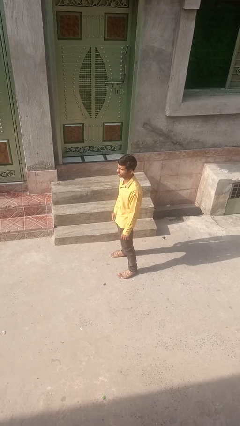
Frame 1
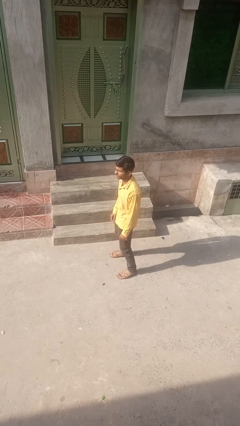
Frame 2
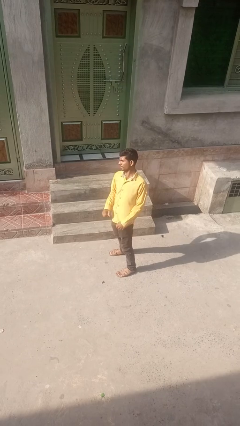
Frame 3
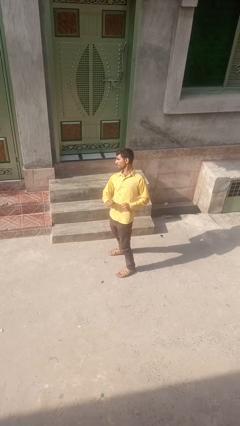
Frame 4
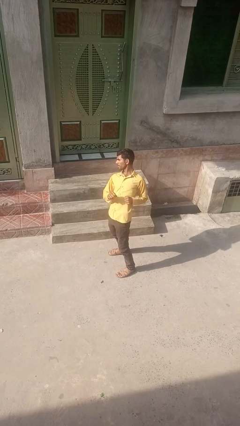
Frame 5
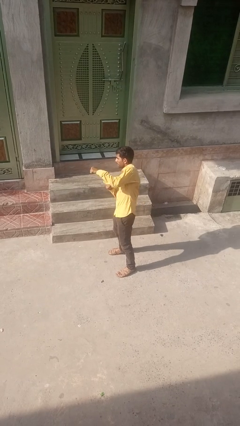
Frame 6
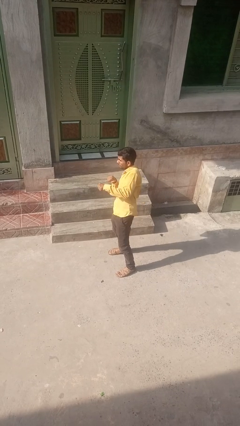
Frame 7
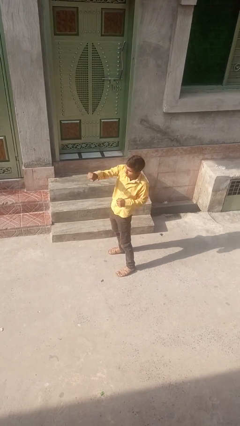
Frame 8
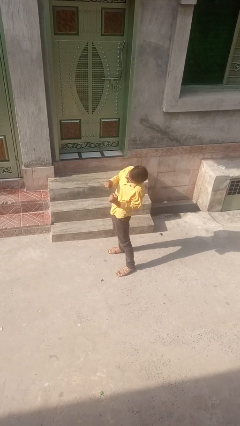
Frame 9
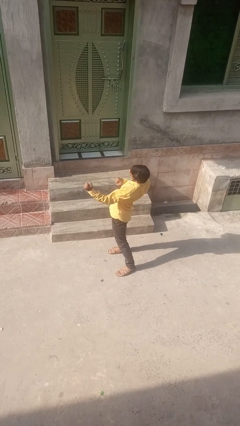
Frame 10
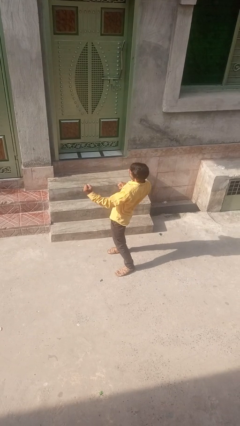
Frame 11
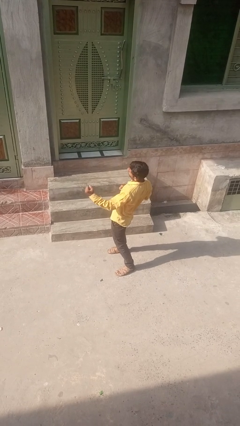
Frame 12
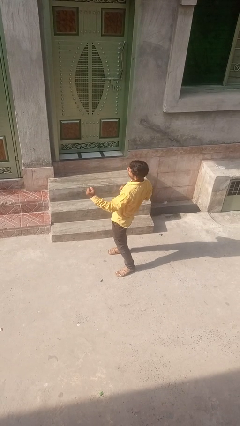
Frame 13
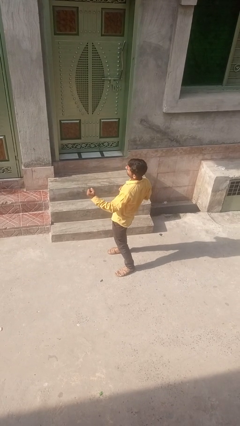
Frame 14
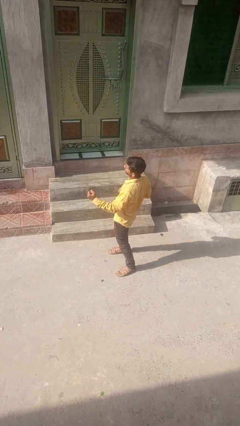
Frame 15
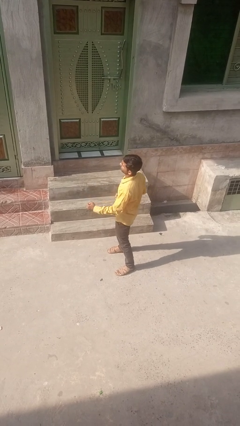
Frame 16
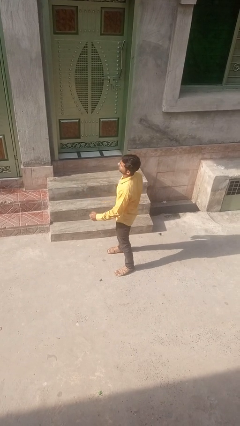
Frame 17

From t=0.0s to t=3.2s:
person punches

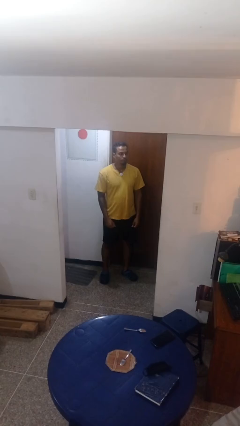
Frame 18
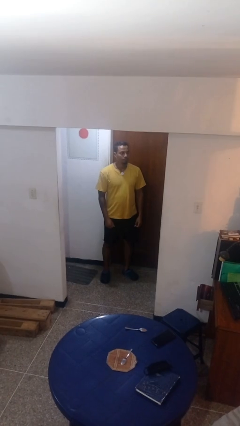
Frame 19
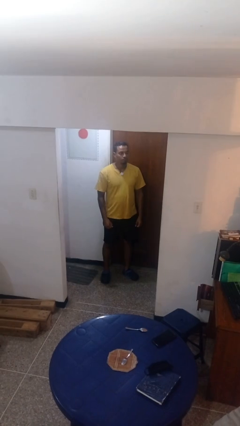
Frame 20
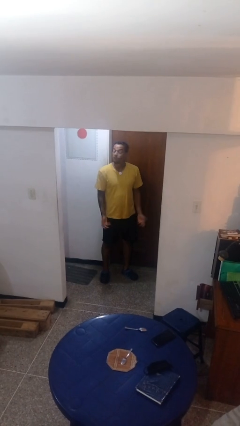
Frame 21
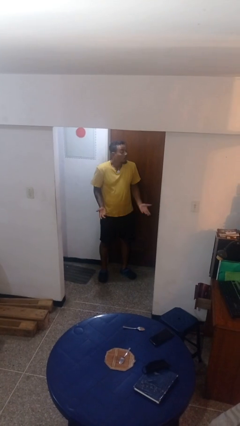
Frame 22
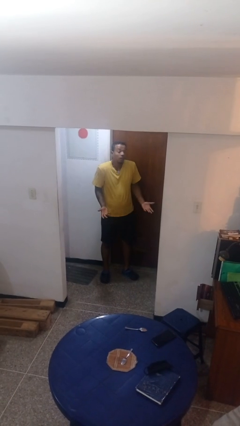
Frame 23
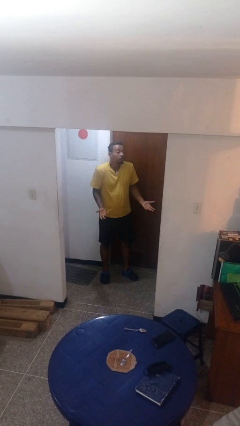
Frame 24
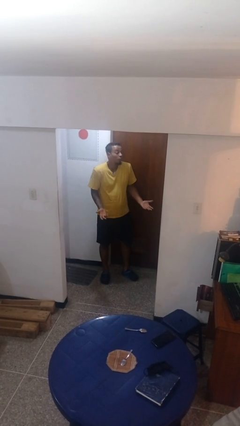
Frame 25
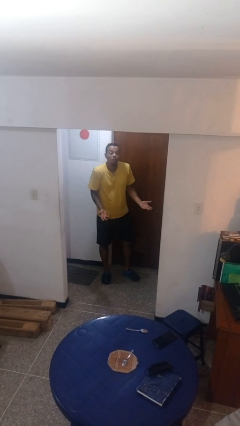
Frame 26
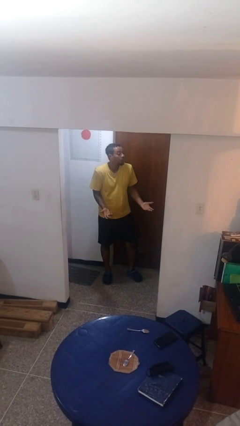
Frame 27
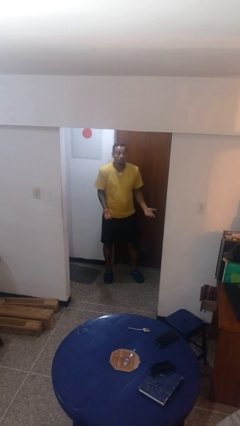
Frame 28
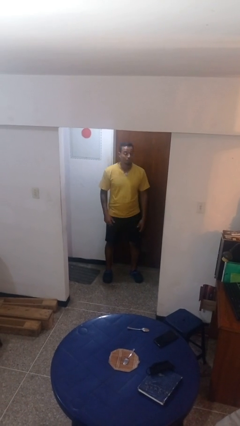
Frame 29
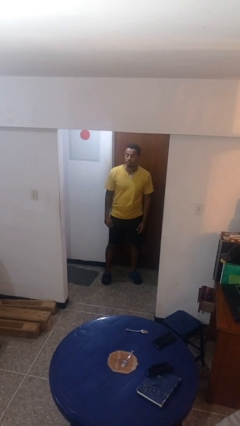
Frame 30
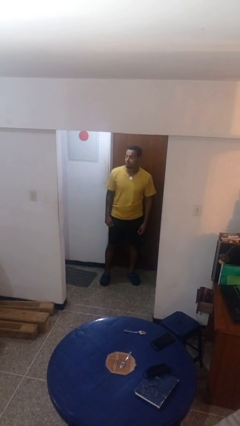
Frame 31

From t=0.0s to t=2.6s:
person shakes head

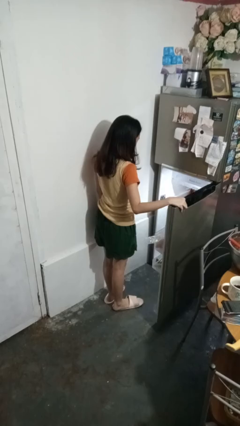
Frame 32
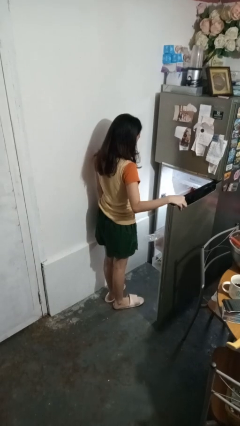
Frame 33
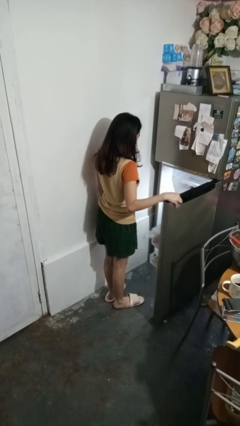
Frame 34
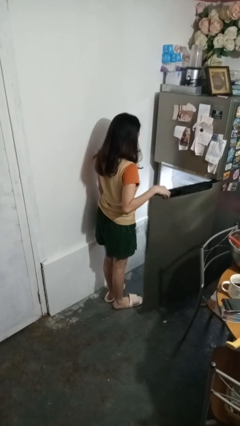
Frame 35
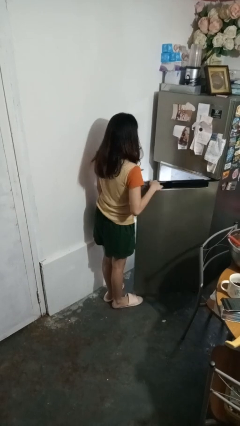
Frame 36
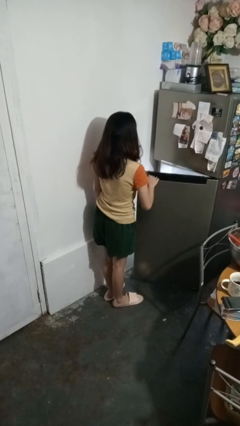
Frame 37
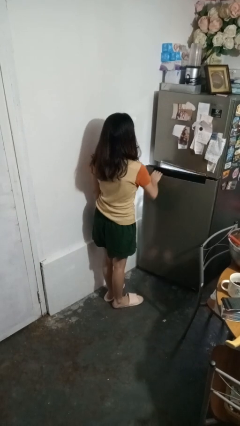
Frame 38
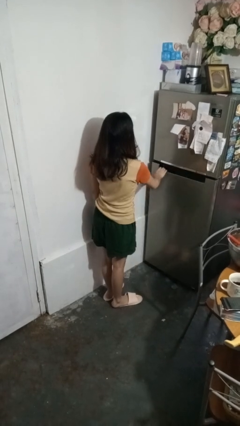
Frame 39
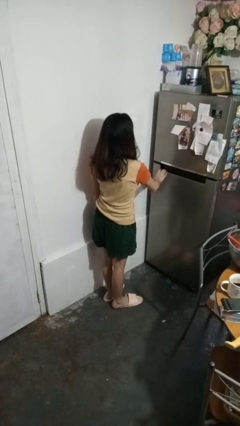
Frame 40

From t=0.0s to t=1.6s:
person closes refrigerator

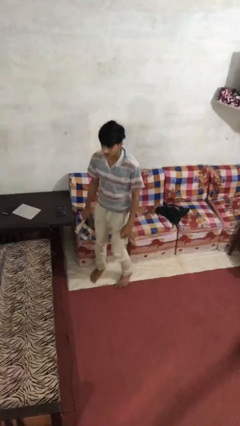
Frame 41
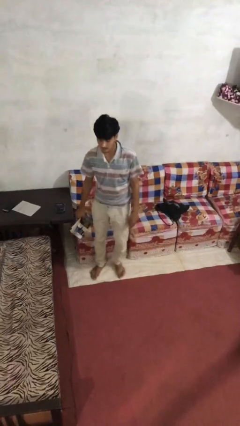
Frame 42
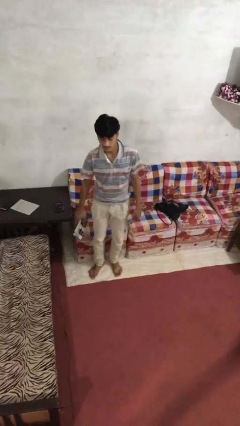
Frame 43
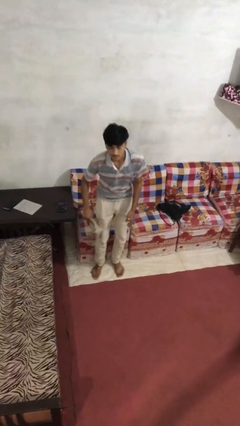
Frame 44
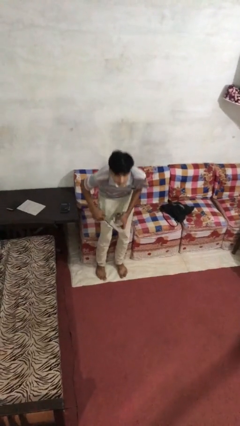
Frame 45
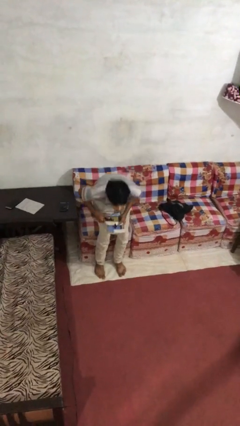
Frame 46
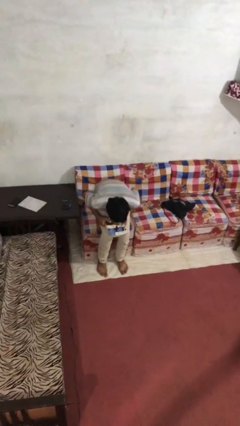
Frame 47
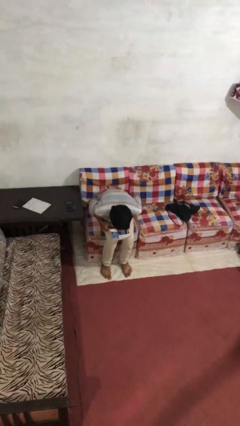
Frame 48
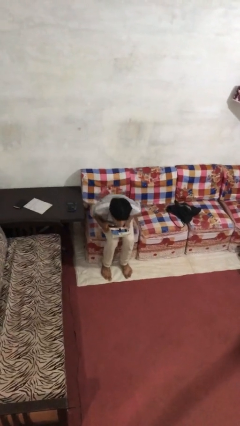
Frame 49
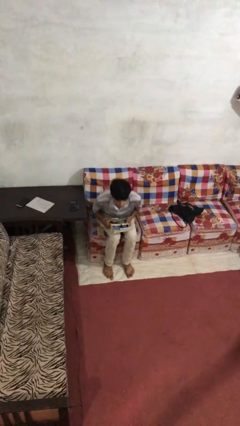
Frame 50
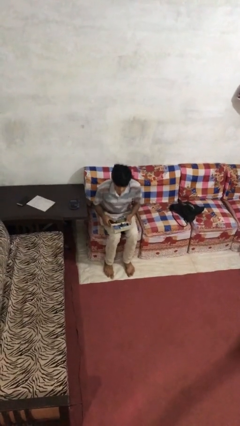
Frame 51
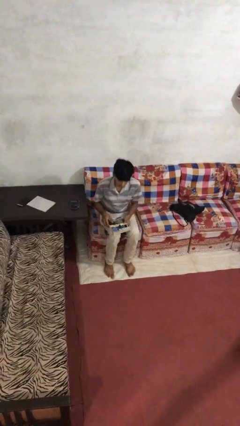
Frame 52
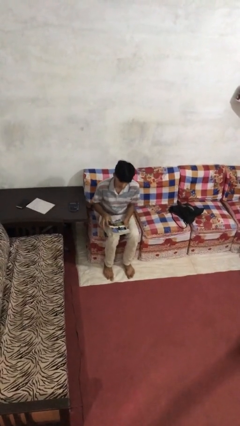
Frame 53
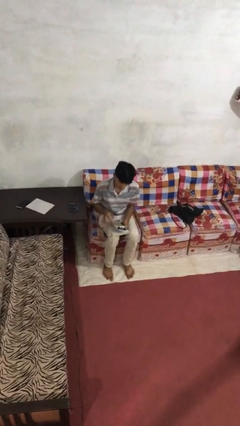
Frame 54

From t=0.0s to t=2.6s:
person sits down

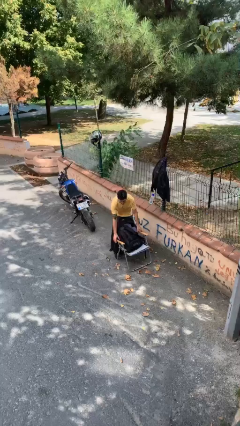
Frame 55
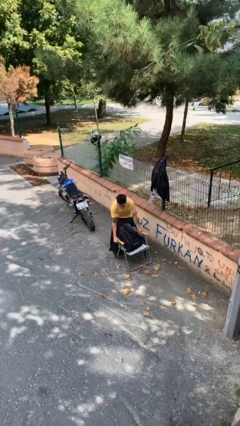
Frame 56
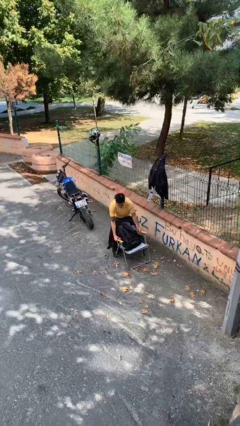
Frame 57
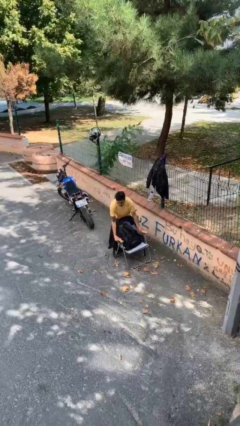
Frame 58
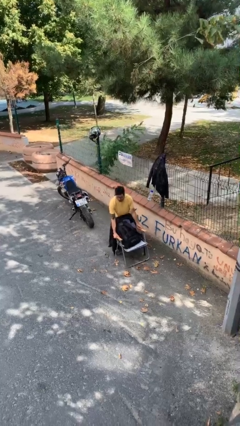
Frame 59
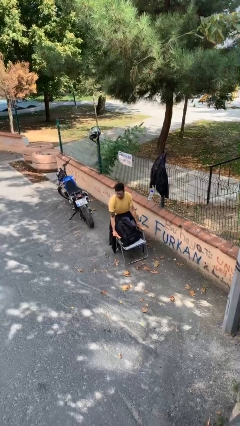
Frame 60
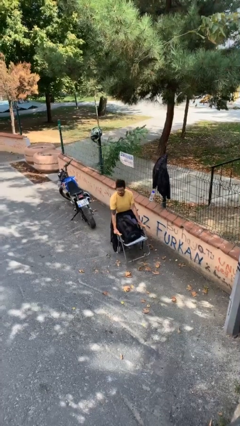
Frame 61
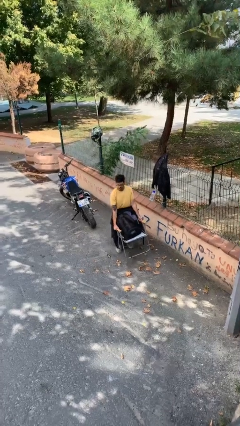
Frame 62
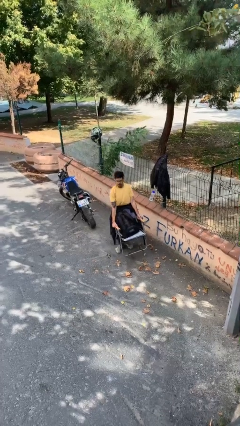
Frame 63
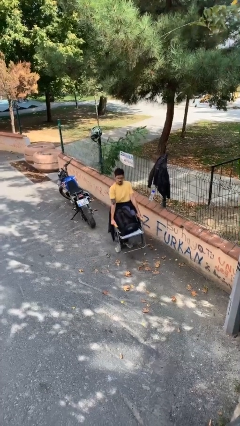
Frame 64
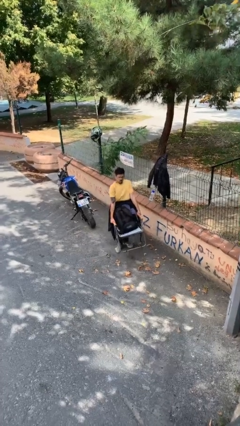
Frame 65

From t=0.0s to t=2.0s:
person picks up object from floor

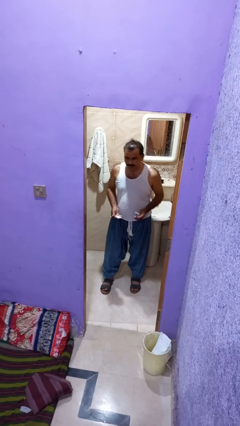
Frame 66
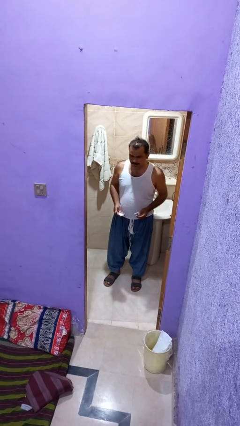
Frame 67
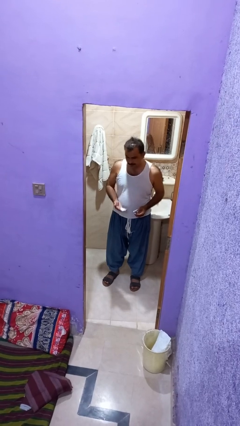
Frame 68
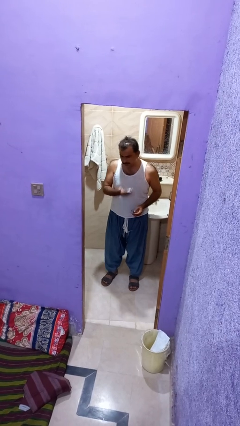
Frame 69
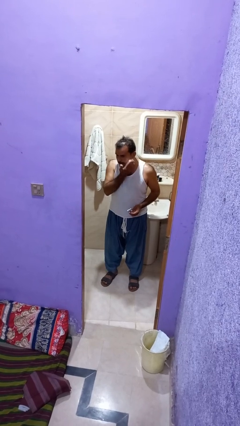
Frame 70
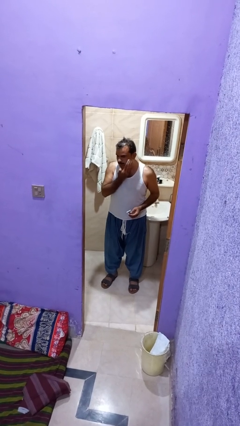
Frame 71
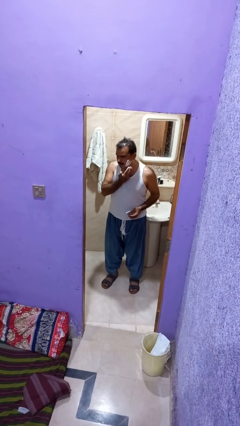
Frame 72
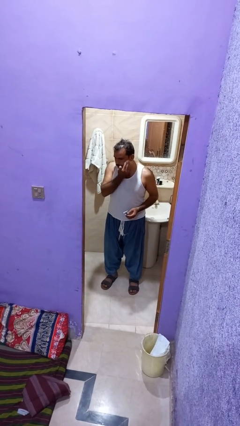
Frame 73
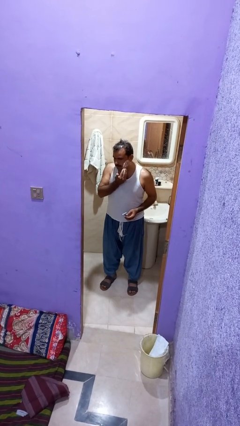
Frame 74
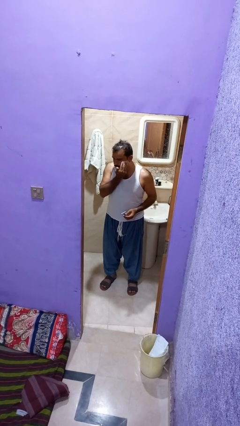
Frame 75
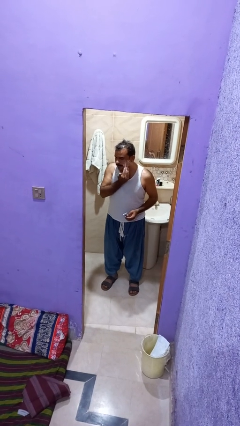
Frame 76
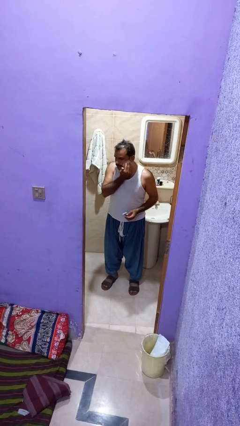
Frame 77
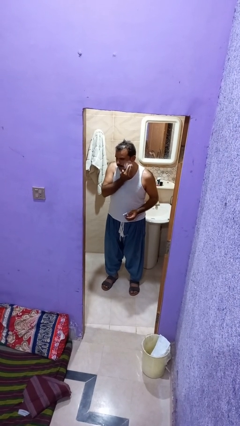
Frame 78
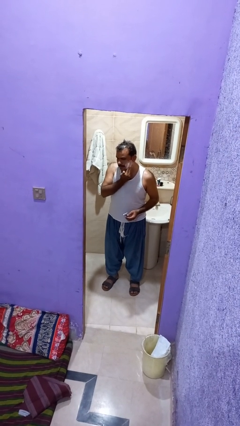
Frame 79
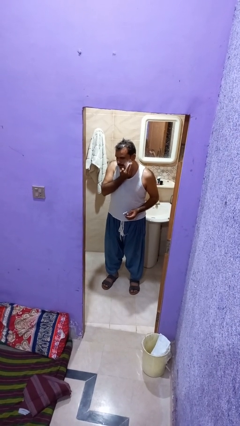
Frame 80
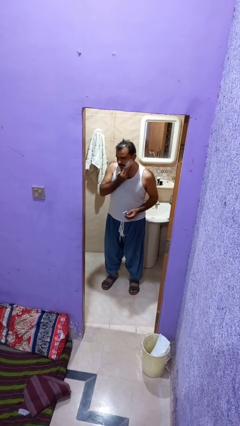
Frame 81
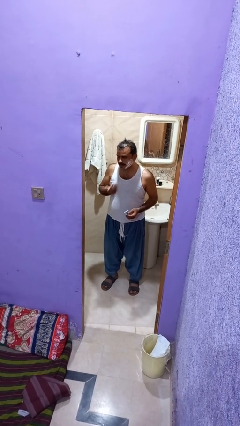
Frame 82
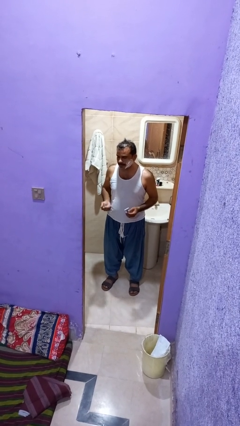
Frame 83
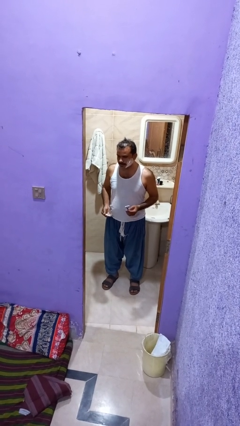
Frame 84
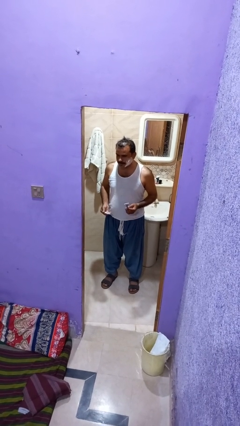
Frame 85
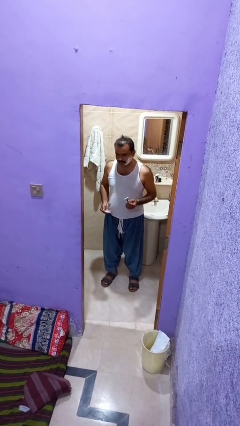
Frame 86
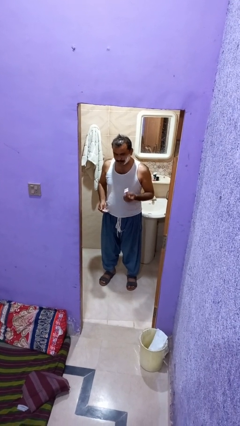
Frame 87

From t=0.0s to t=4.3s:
person applies shaving cream

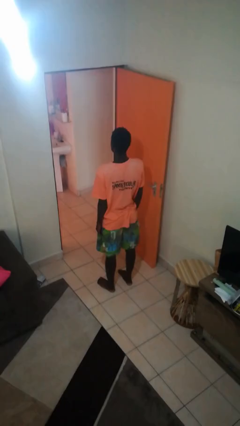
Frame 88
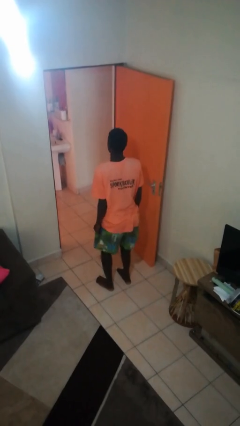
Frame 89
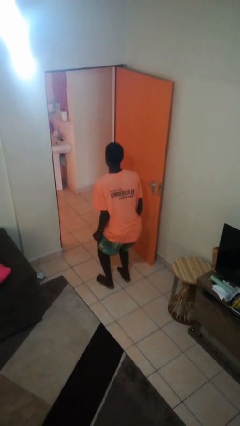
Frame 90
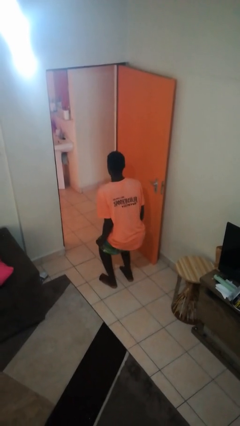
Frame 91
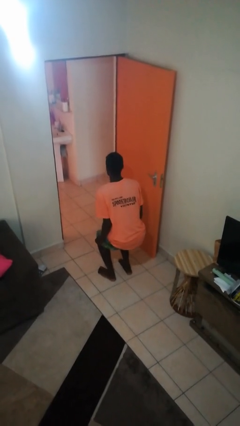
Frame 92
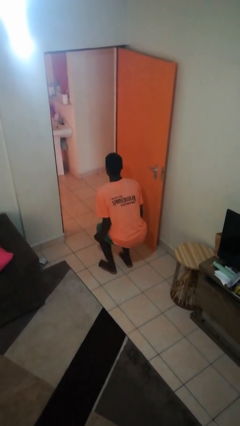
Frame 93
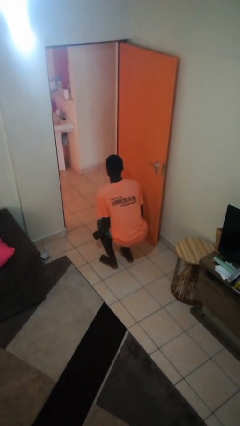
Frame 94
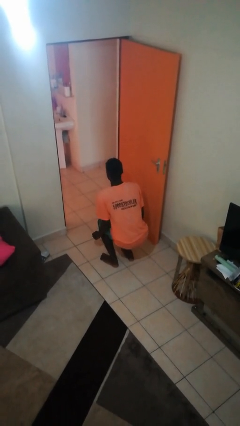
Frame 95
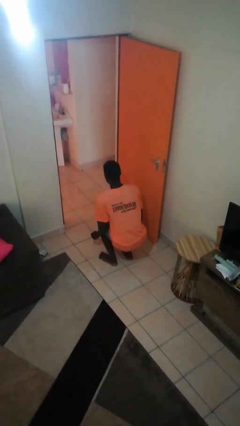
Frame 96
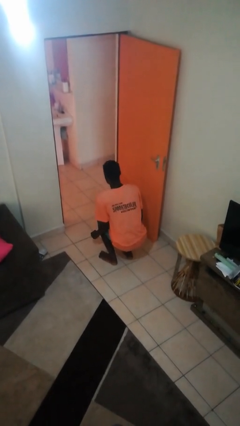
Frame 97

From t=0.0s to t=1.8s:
person squats
